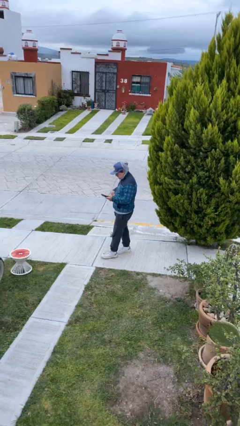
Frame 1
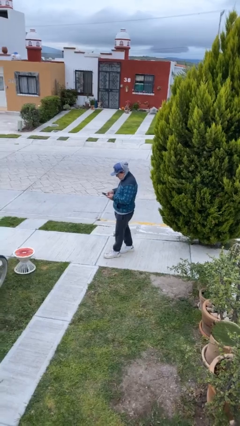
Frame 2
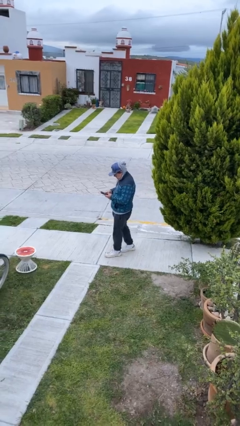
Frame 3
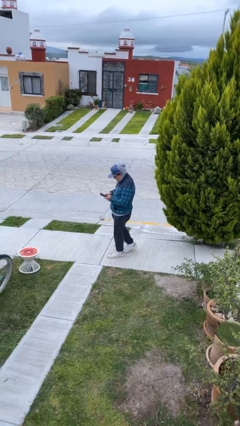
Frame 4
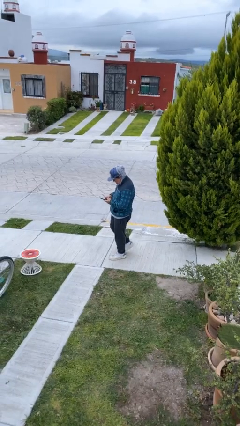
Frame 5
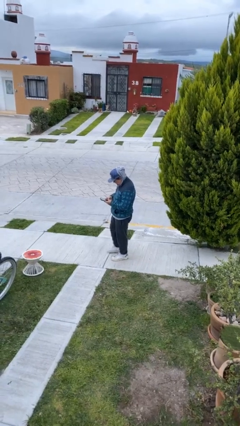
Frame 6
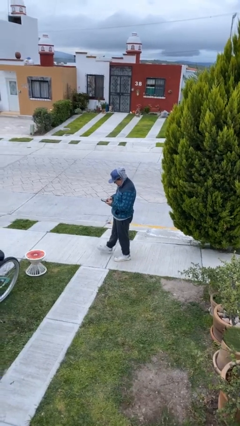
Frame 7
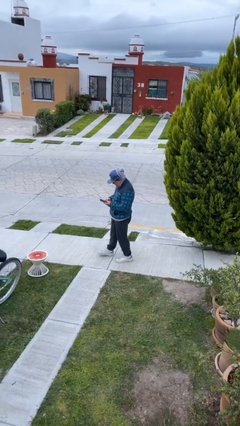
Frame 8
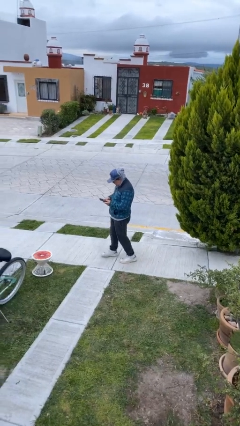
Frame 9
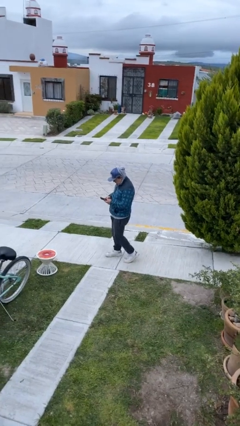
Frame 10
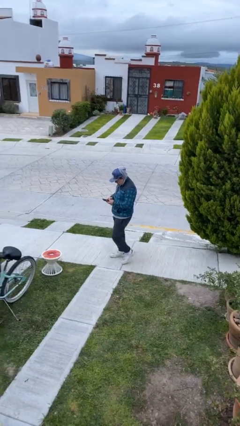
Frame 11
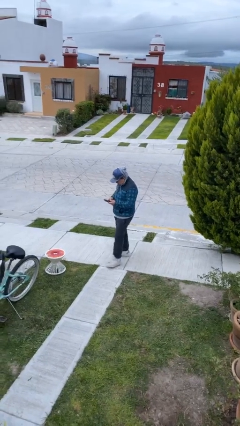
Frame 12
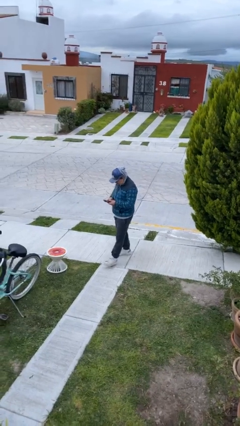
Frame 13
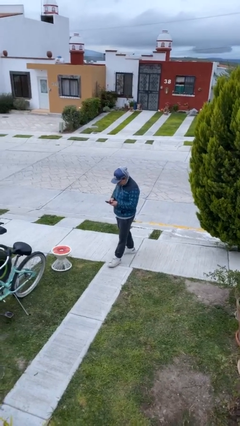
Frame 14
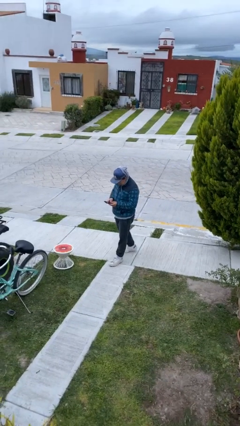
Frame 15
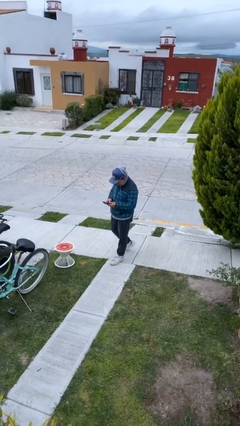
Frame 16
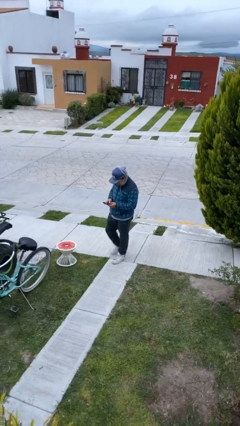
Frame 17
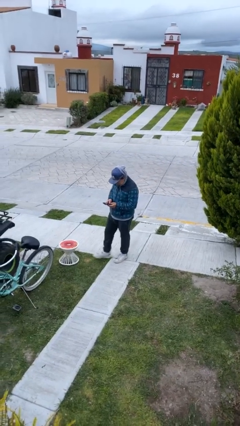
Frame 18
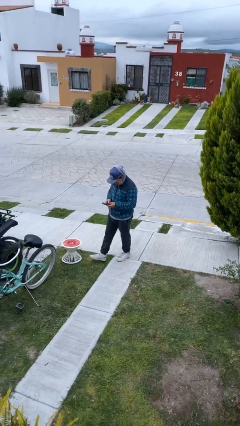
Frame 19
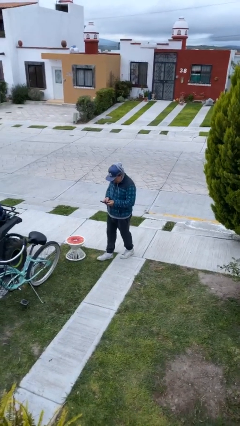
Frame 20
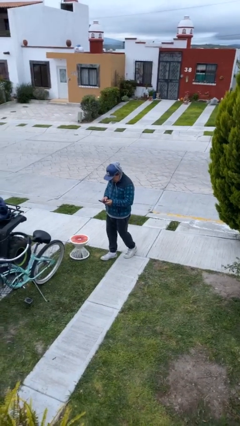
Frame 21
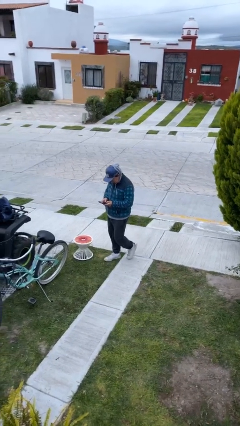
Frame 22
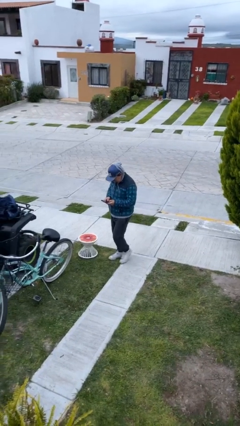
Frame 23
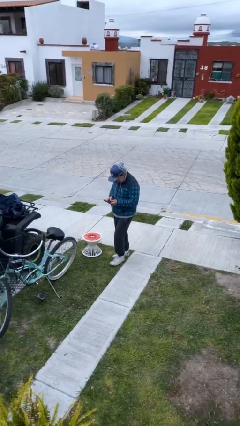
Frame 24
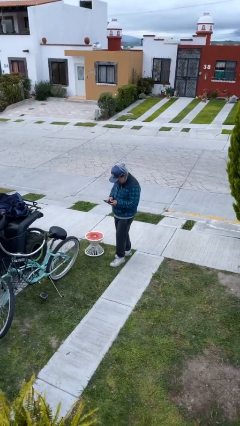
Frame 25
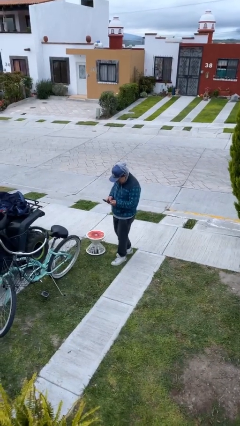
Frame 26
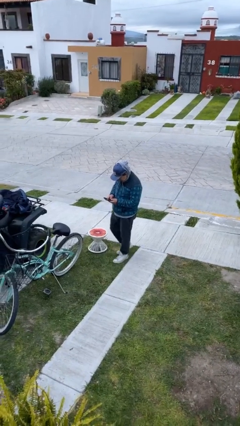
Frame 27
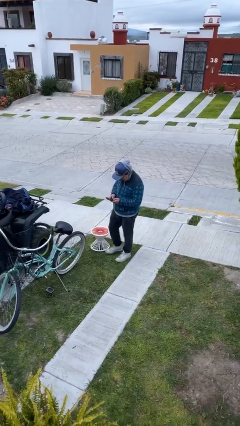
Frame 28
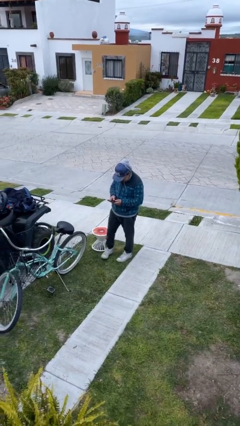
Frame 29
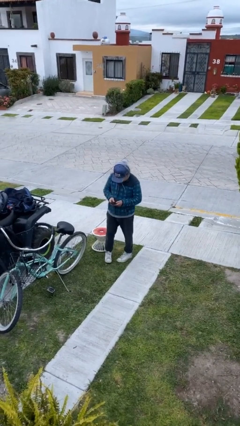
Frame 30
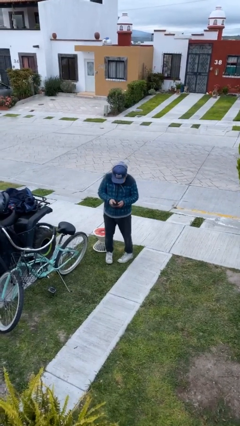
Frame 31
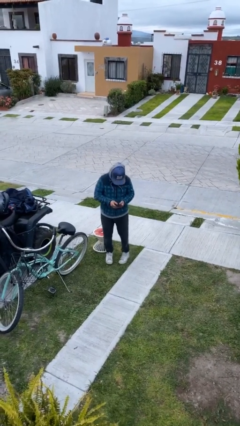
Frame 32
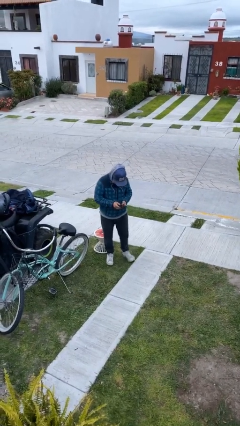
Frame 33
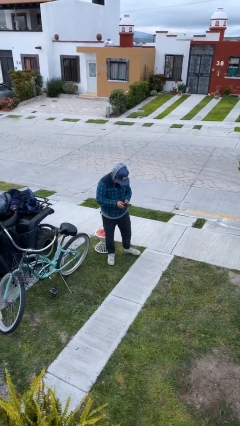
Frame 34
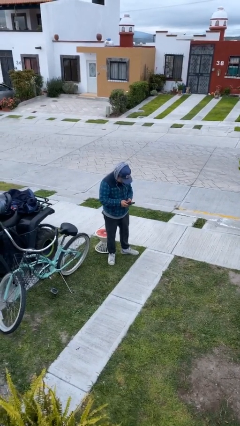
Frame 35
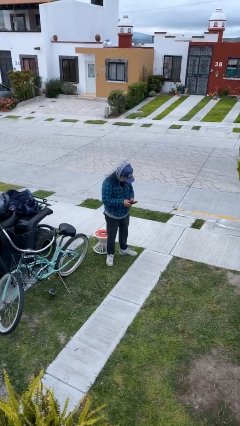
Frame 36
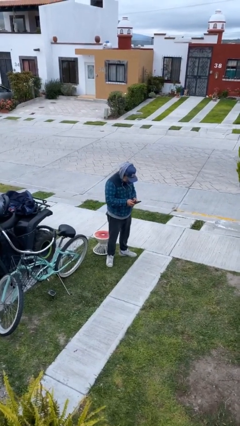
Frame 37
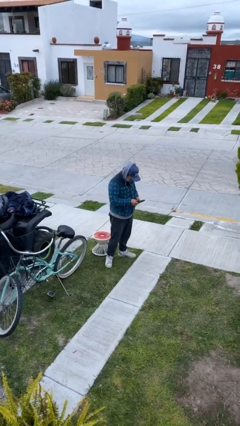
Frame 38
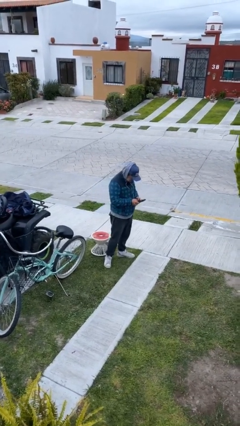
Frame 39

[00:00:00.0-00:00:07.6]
person texts on phone

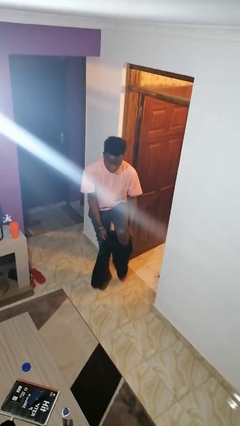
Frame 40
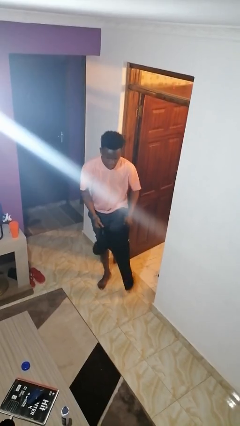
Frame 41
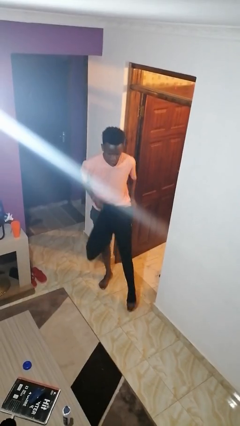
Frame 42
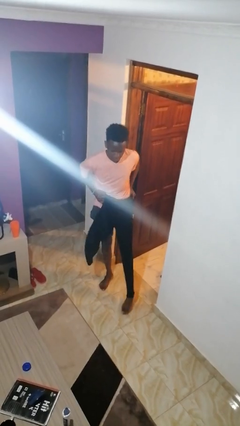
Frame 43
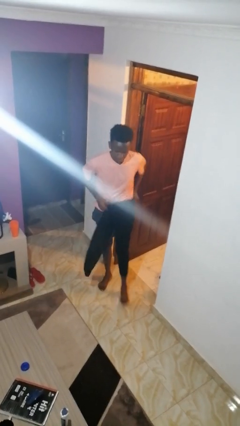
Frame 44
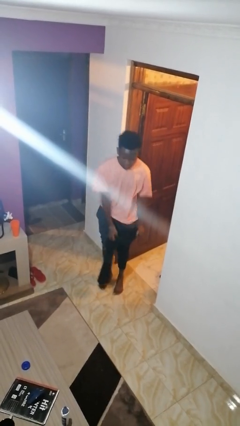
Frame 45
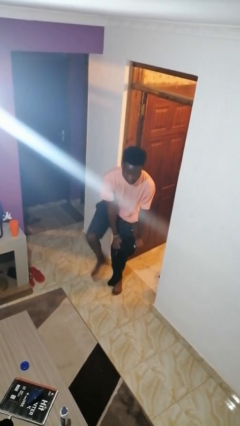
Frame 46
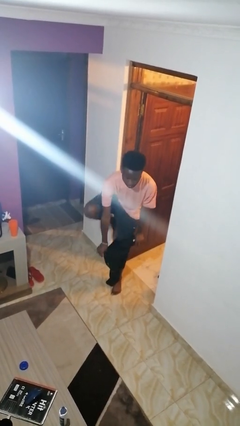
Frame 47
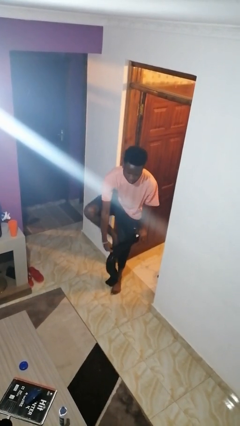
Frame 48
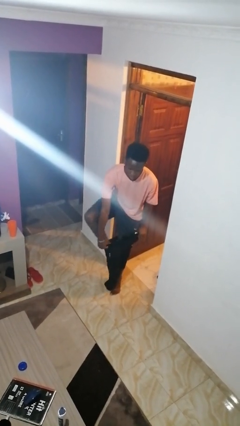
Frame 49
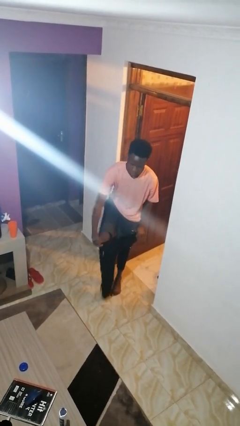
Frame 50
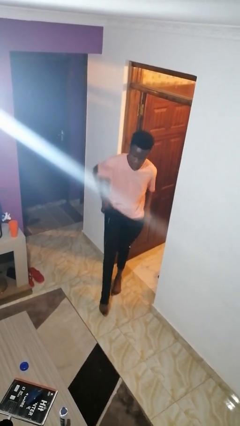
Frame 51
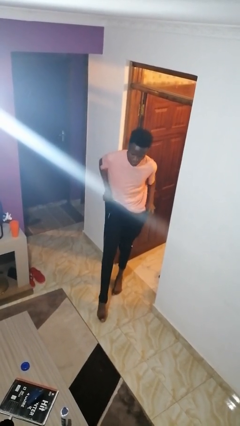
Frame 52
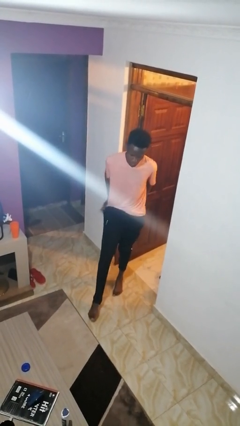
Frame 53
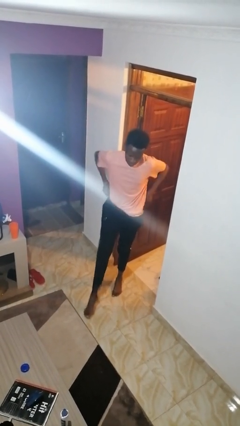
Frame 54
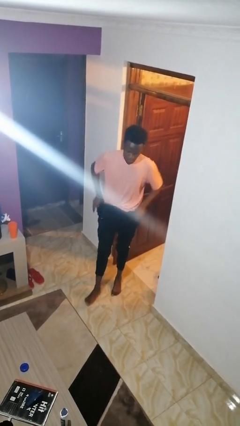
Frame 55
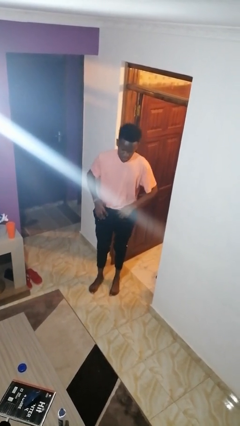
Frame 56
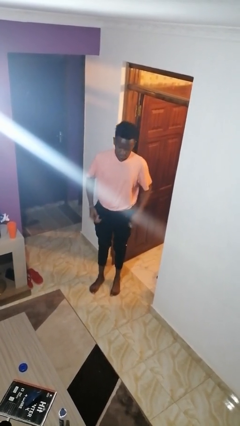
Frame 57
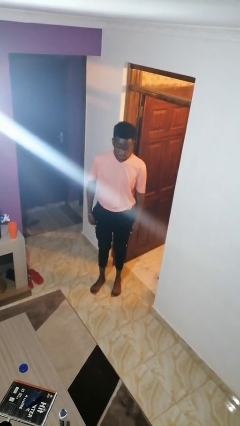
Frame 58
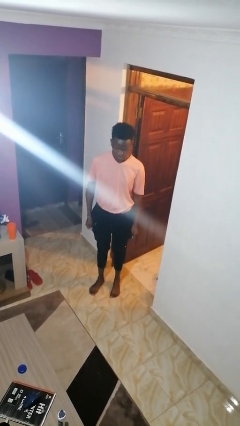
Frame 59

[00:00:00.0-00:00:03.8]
person puts on pants

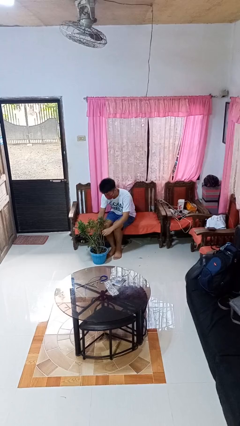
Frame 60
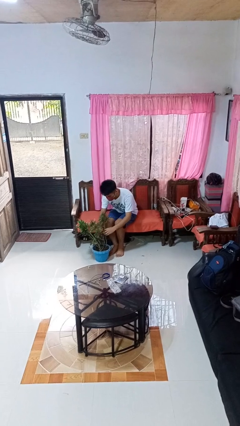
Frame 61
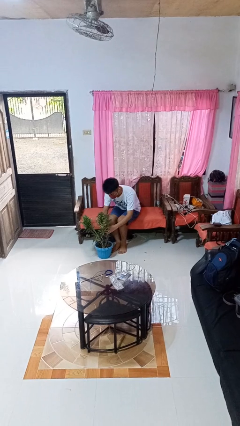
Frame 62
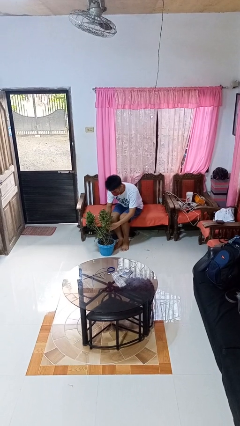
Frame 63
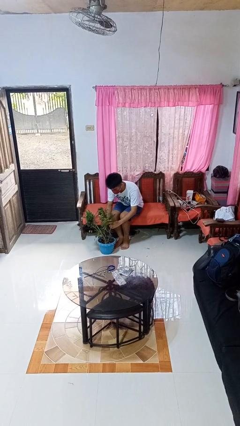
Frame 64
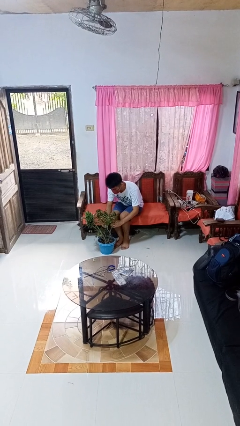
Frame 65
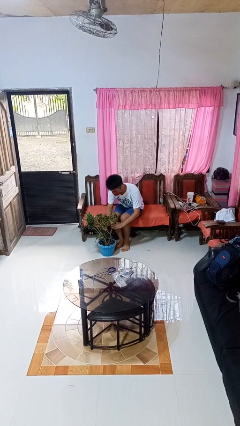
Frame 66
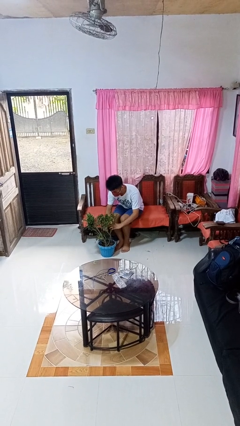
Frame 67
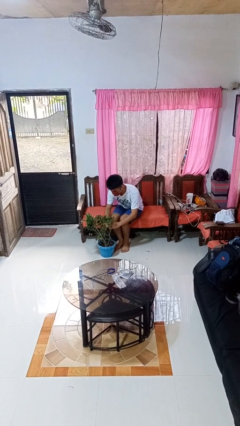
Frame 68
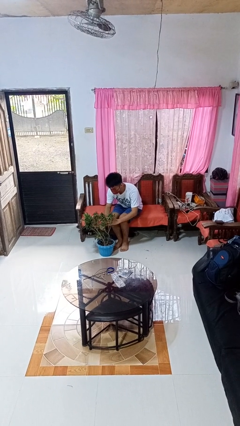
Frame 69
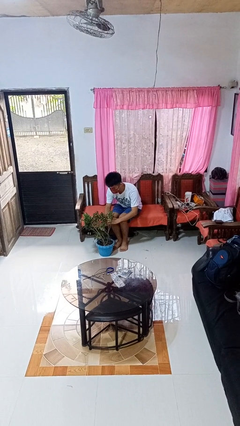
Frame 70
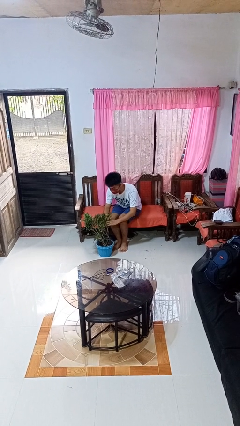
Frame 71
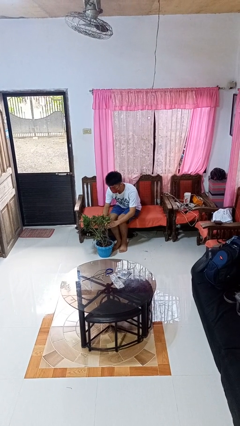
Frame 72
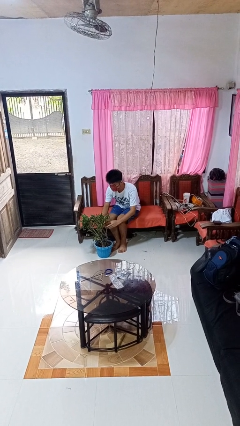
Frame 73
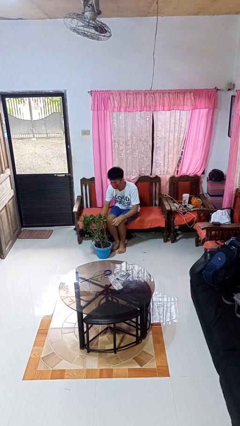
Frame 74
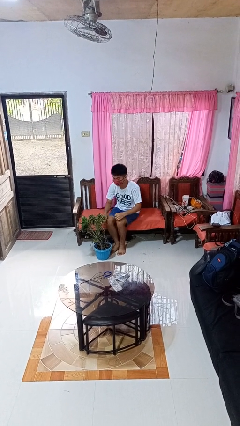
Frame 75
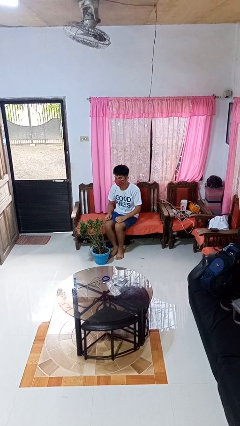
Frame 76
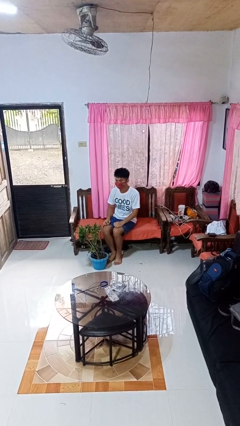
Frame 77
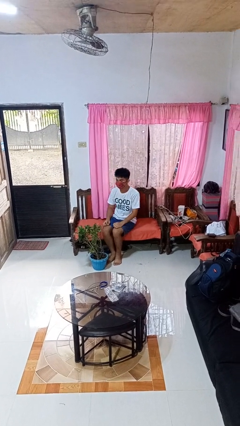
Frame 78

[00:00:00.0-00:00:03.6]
person arranges flowers in vase

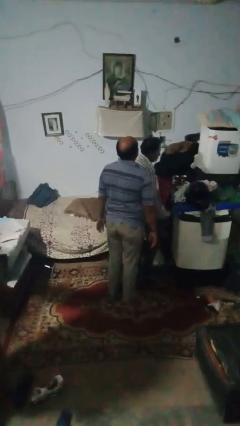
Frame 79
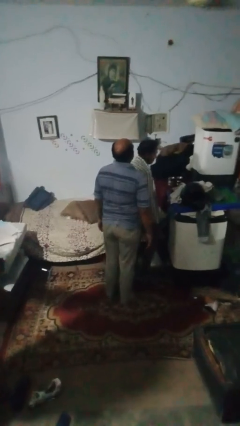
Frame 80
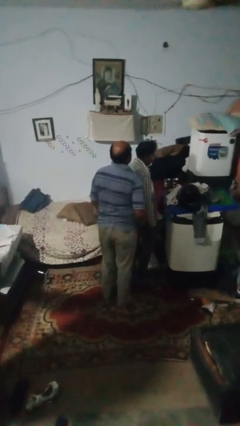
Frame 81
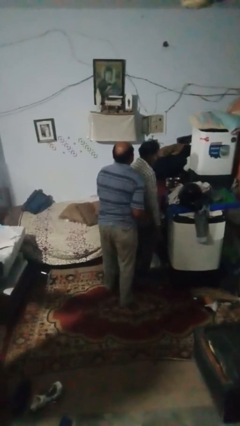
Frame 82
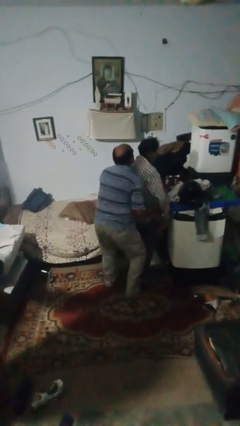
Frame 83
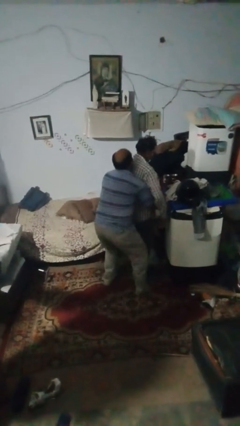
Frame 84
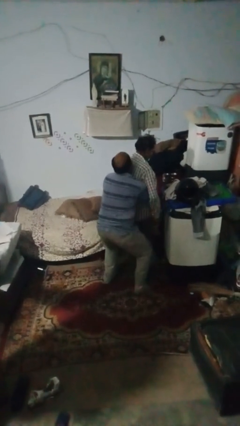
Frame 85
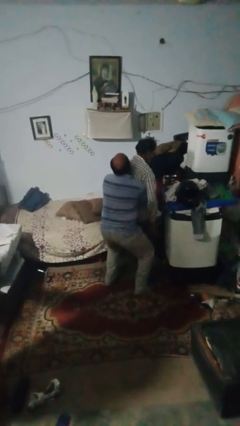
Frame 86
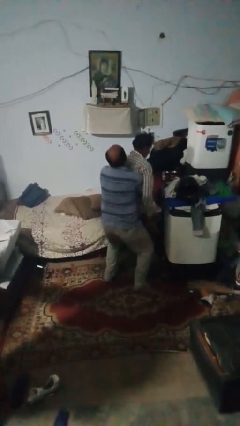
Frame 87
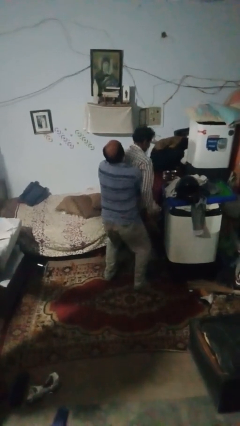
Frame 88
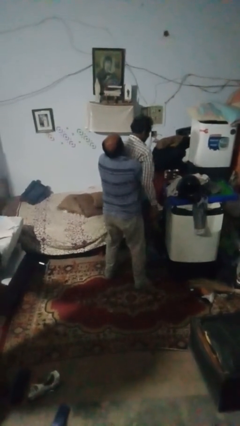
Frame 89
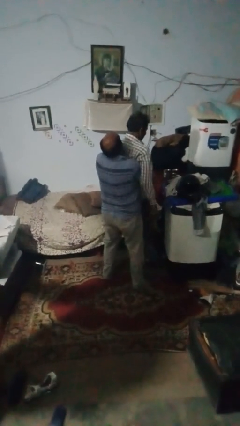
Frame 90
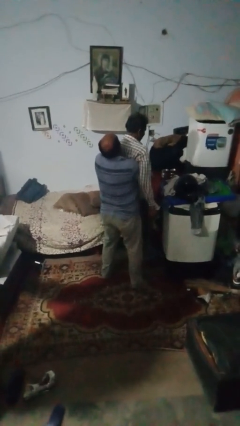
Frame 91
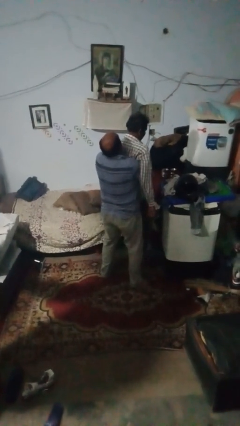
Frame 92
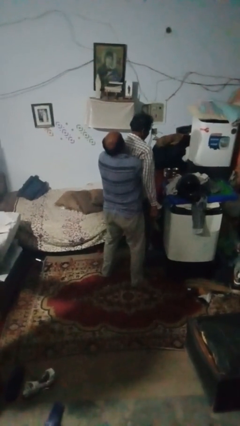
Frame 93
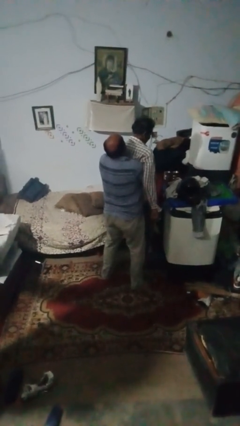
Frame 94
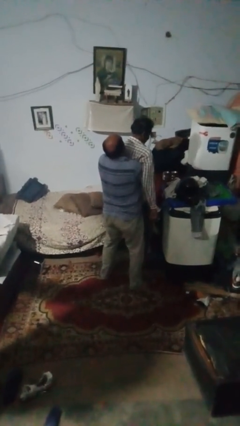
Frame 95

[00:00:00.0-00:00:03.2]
person carries person on back
